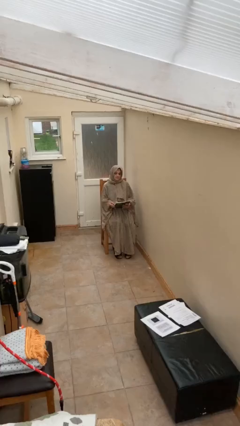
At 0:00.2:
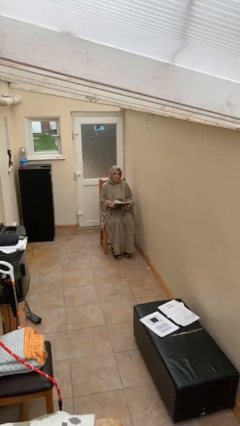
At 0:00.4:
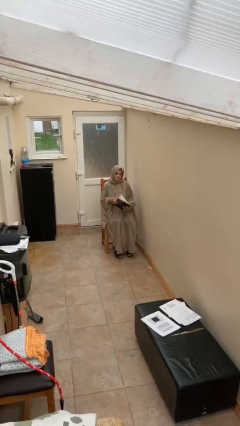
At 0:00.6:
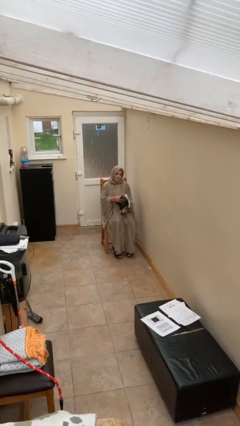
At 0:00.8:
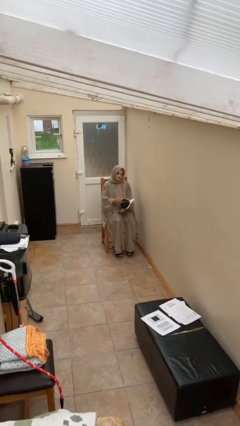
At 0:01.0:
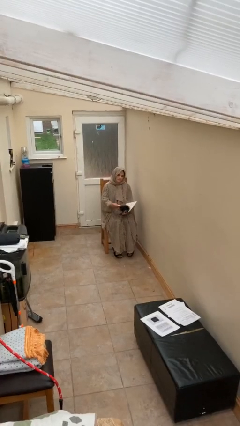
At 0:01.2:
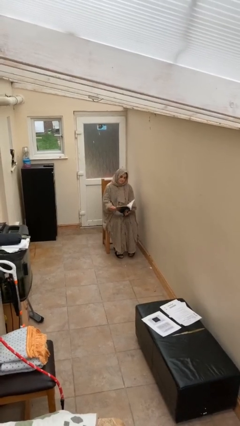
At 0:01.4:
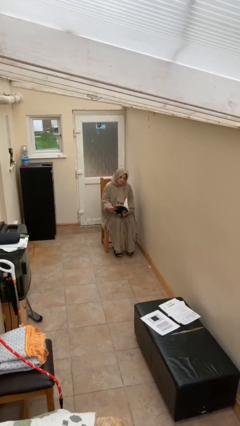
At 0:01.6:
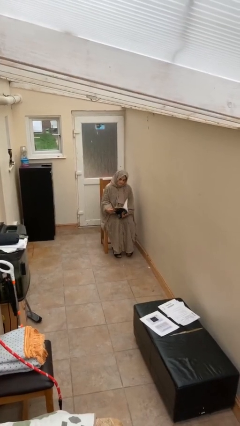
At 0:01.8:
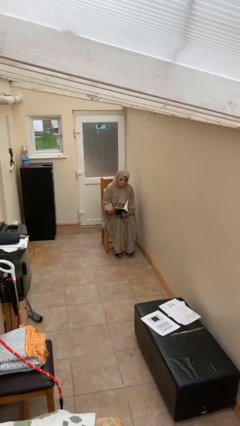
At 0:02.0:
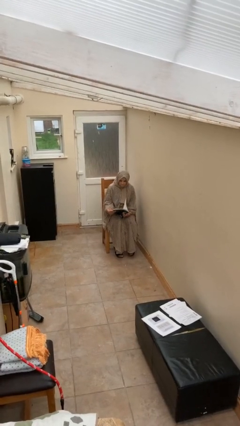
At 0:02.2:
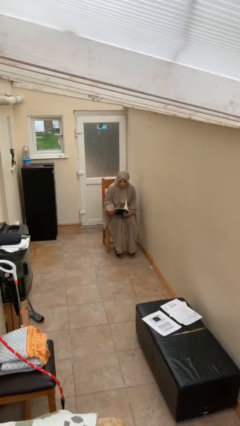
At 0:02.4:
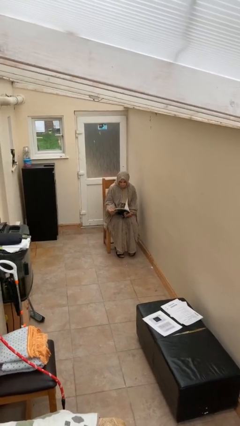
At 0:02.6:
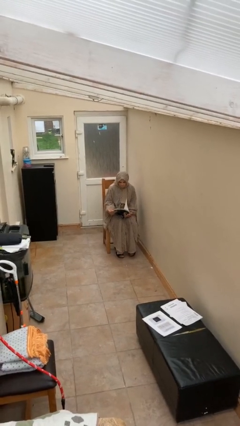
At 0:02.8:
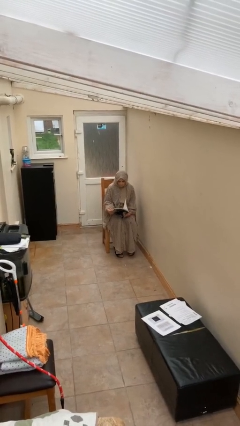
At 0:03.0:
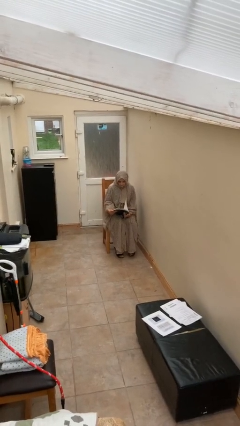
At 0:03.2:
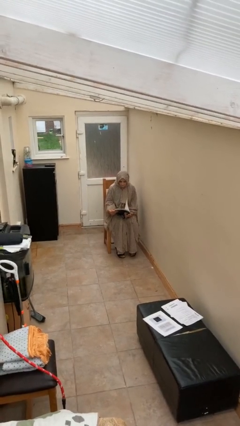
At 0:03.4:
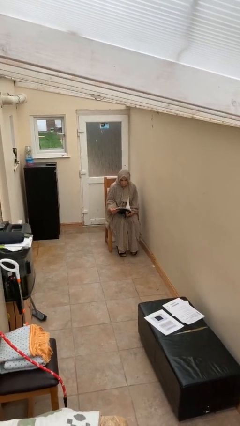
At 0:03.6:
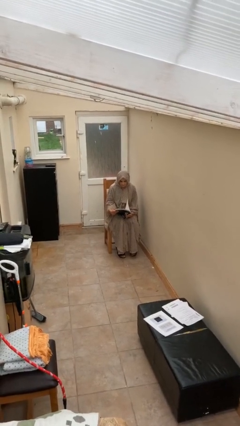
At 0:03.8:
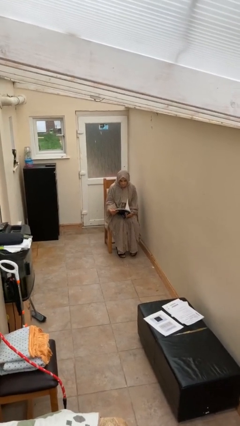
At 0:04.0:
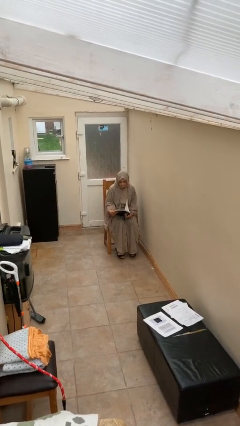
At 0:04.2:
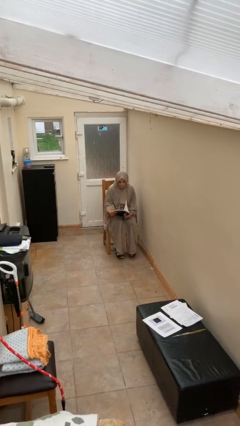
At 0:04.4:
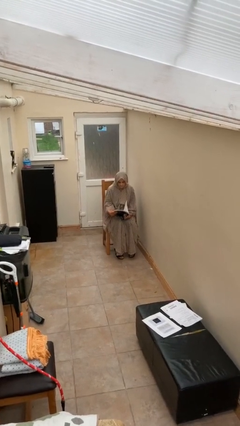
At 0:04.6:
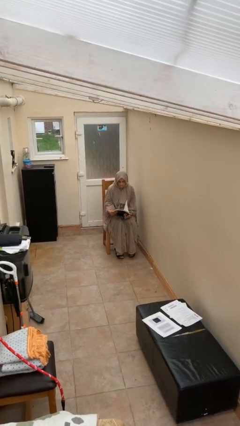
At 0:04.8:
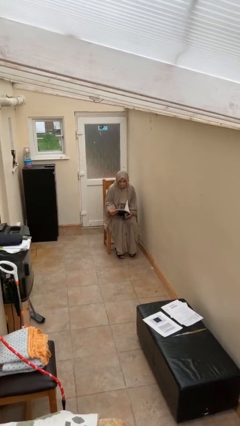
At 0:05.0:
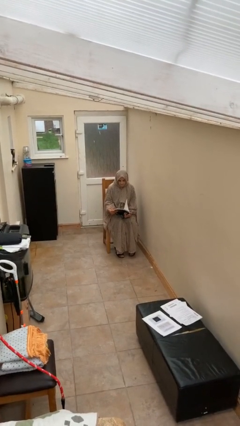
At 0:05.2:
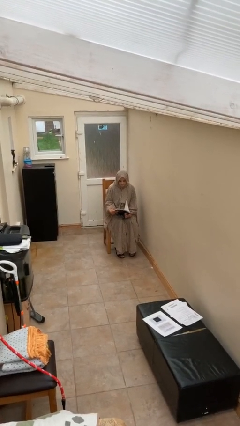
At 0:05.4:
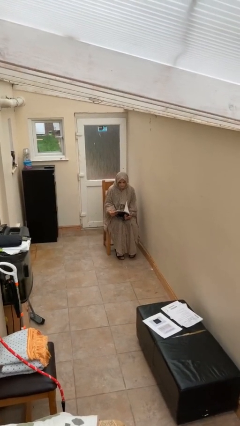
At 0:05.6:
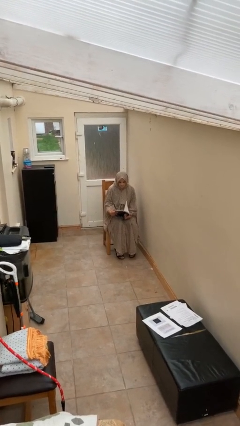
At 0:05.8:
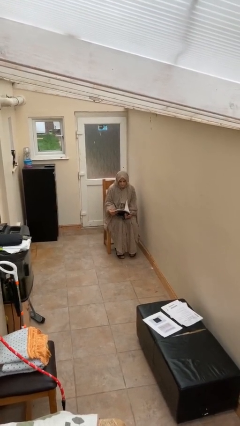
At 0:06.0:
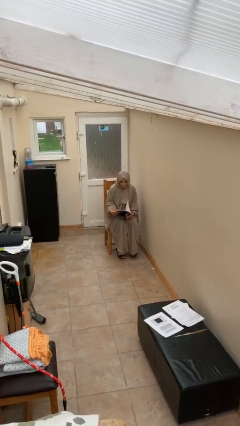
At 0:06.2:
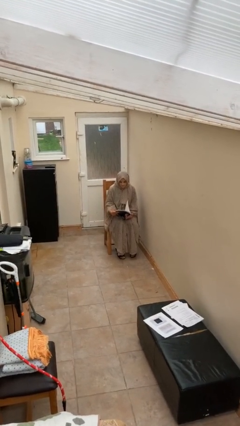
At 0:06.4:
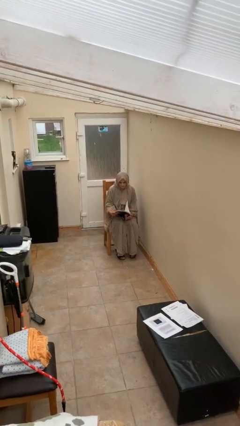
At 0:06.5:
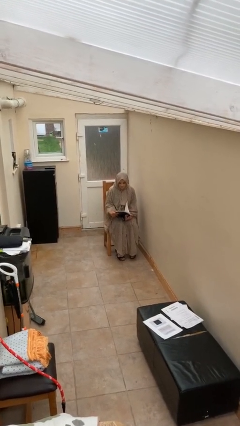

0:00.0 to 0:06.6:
person reads document

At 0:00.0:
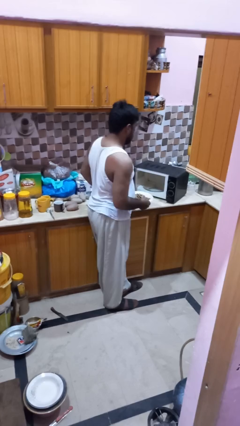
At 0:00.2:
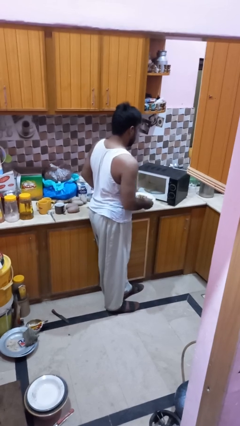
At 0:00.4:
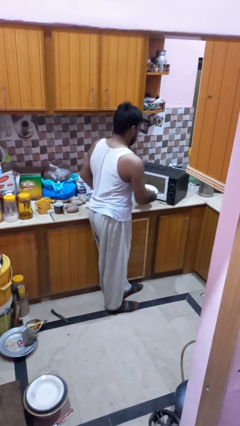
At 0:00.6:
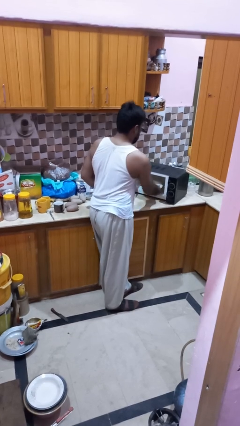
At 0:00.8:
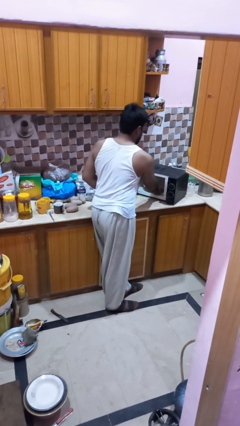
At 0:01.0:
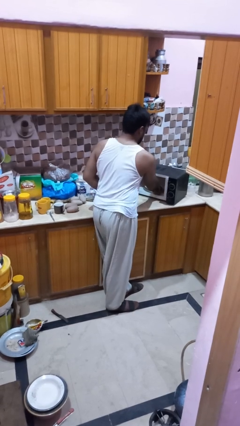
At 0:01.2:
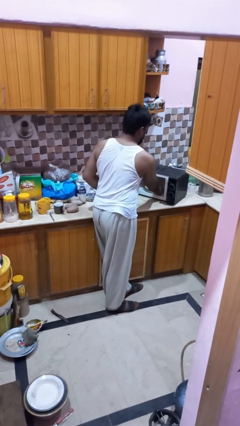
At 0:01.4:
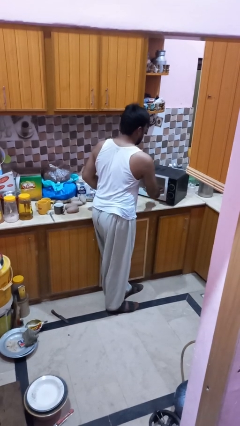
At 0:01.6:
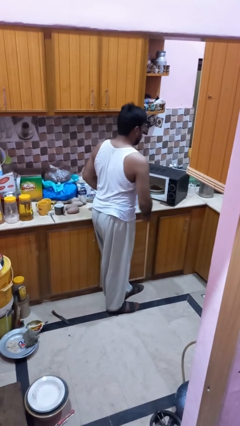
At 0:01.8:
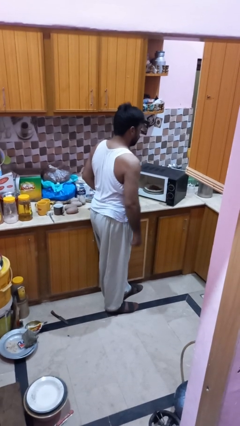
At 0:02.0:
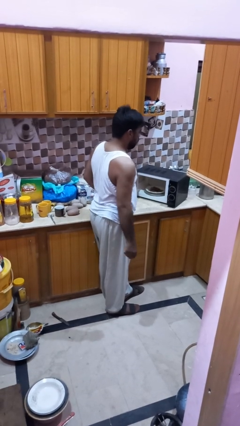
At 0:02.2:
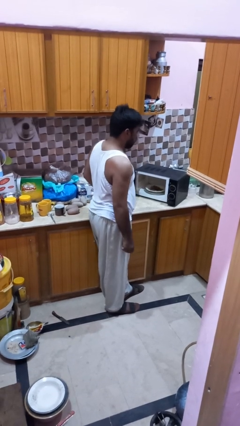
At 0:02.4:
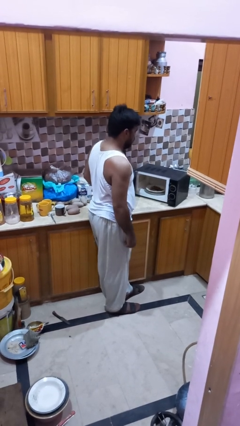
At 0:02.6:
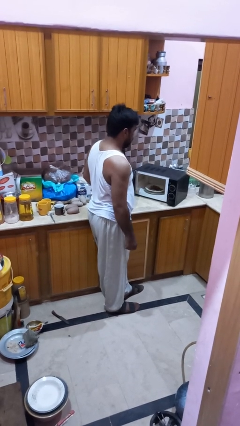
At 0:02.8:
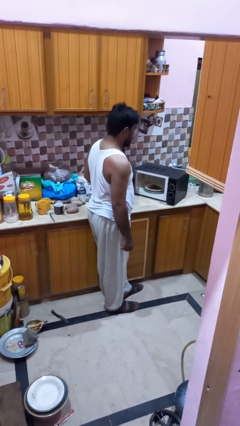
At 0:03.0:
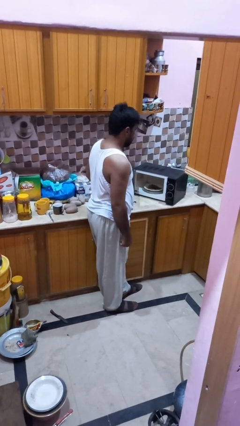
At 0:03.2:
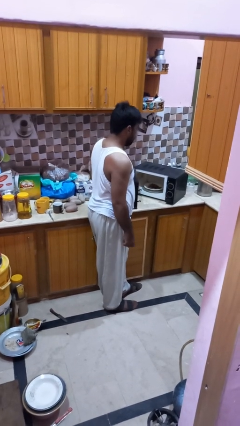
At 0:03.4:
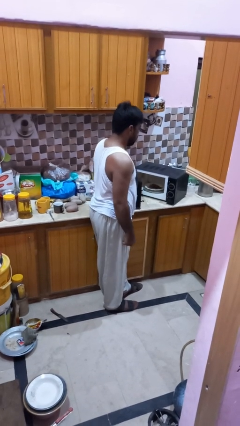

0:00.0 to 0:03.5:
person puts object into microwave

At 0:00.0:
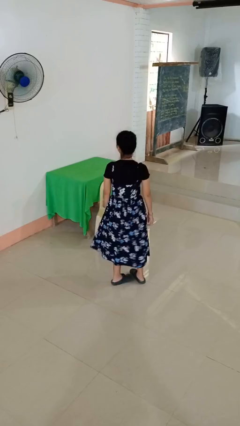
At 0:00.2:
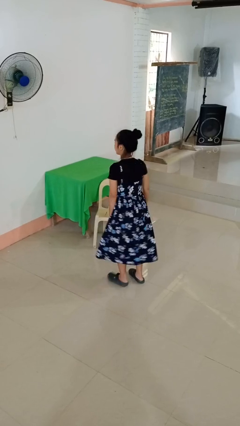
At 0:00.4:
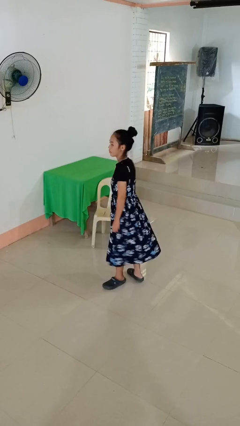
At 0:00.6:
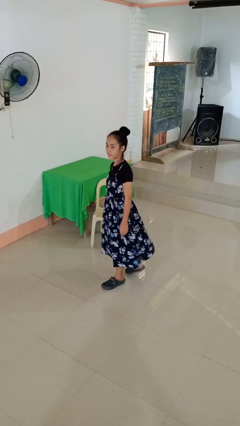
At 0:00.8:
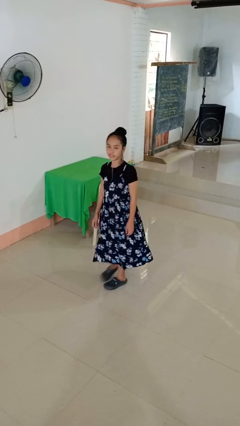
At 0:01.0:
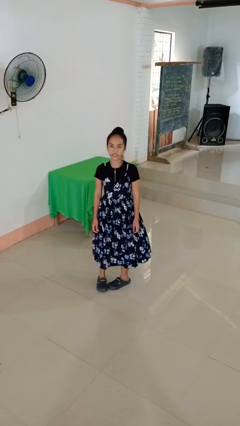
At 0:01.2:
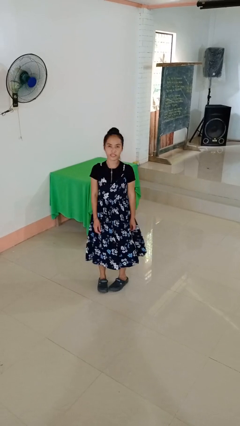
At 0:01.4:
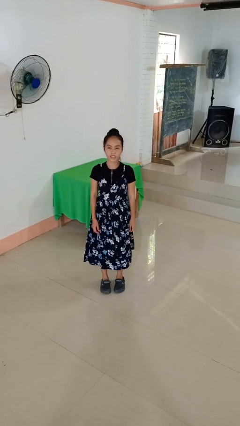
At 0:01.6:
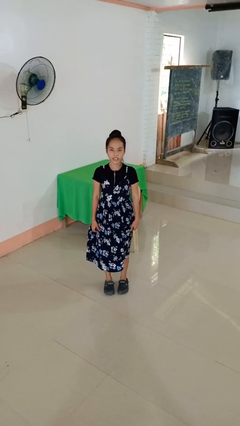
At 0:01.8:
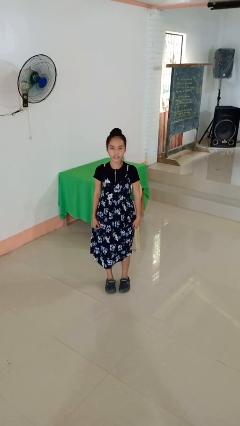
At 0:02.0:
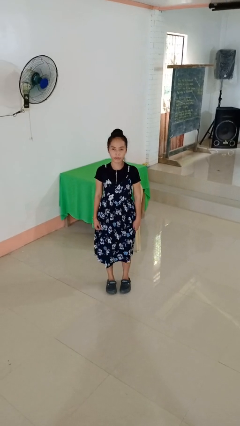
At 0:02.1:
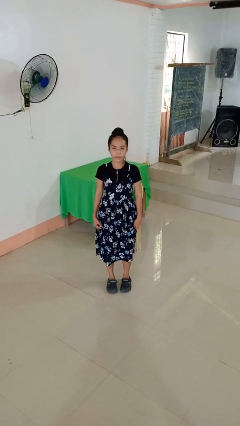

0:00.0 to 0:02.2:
person twirls

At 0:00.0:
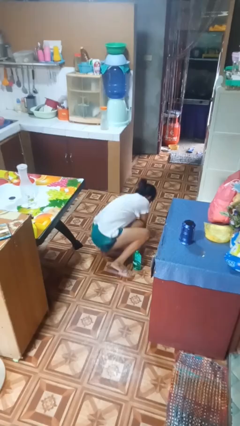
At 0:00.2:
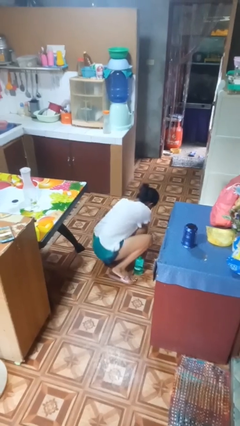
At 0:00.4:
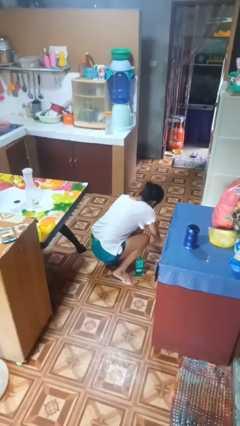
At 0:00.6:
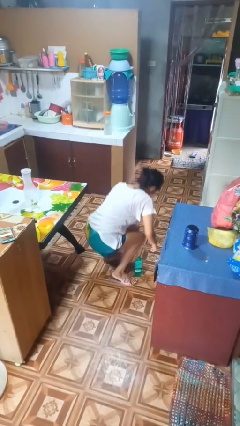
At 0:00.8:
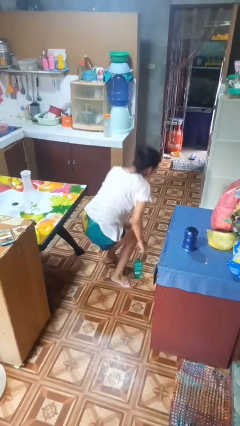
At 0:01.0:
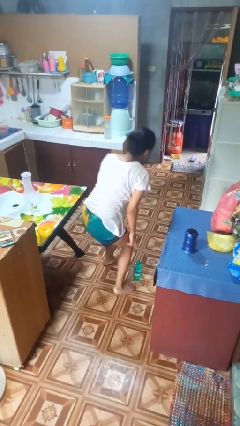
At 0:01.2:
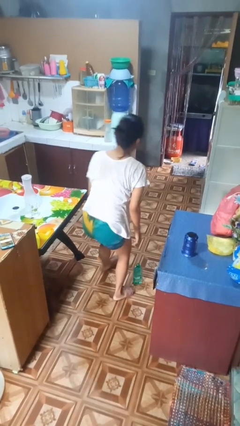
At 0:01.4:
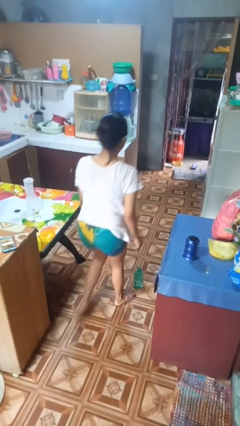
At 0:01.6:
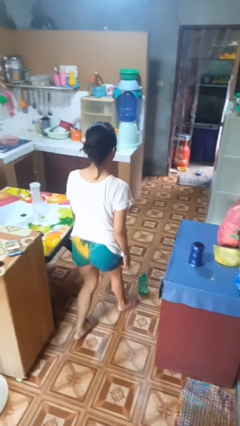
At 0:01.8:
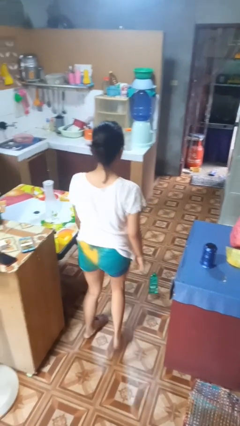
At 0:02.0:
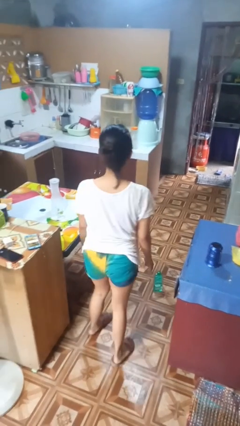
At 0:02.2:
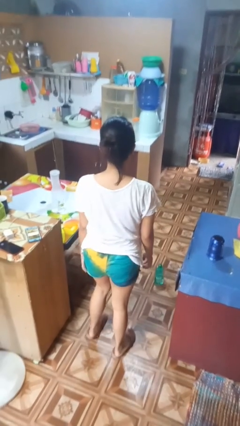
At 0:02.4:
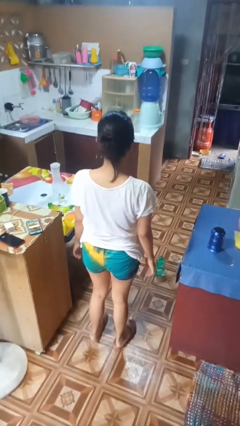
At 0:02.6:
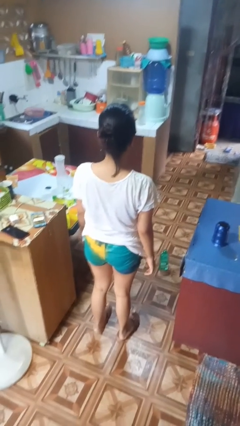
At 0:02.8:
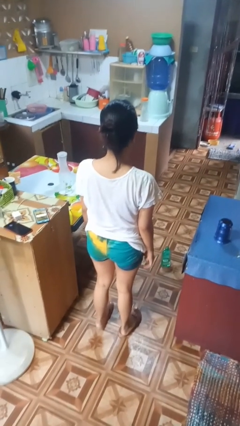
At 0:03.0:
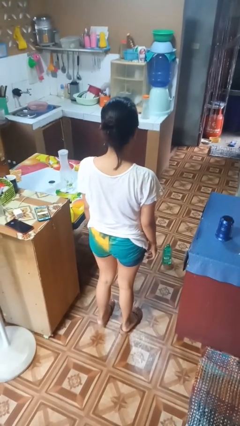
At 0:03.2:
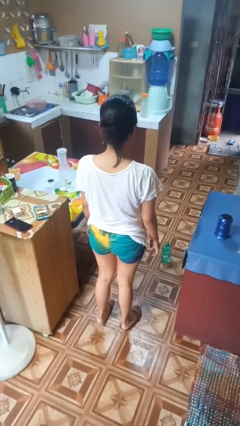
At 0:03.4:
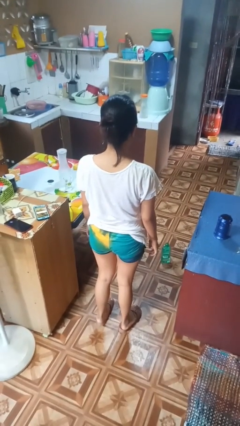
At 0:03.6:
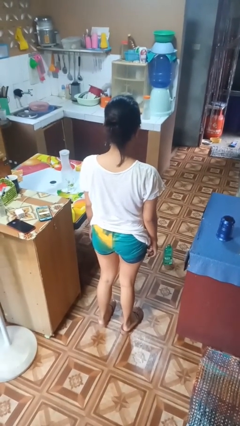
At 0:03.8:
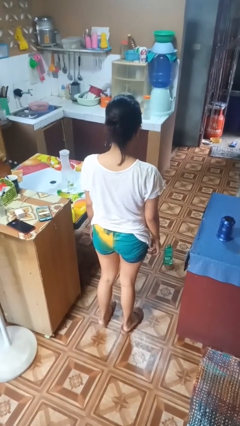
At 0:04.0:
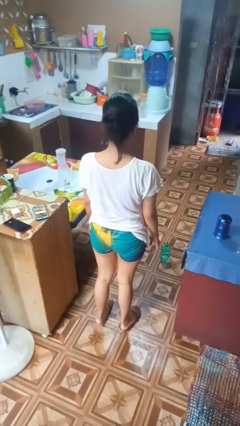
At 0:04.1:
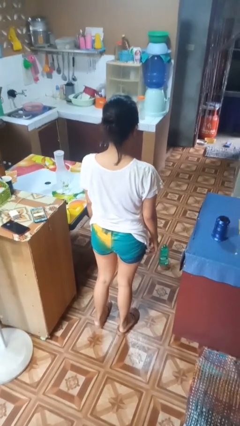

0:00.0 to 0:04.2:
person stands up from floor

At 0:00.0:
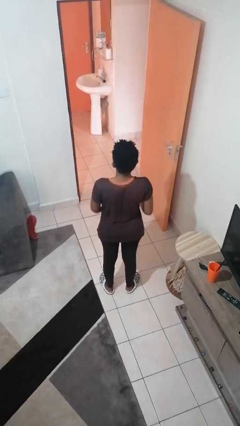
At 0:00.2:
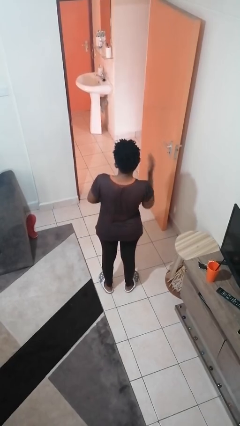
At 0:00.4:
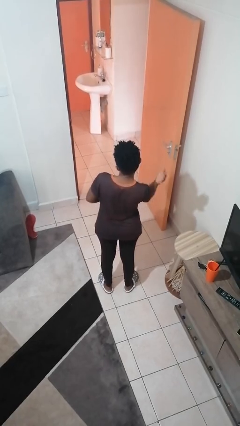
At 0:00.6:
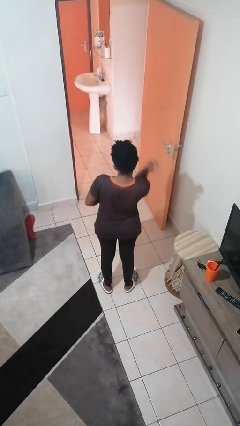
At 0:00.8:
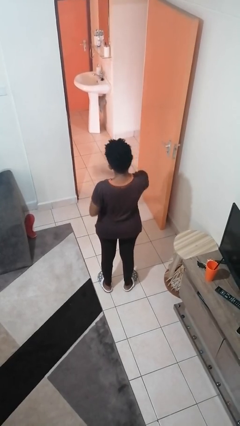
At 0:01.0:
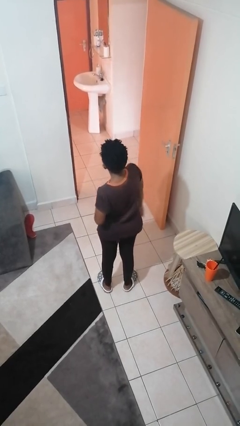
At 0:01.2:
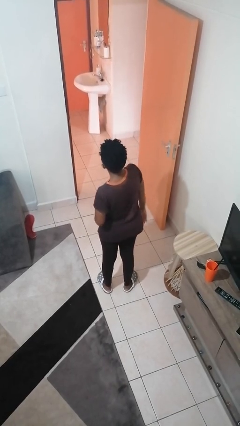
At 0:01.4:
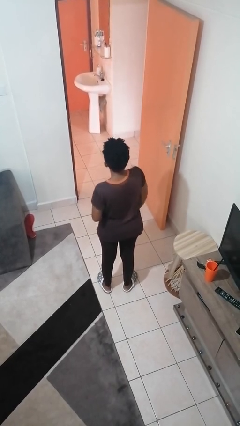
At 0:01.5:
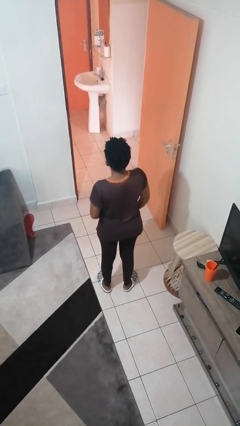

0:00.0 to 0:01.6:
person karate chop
